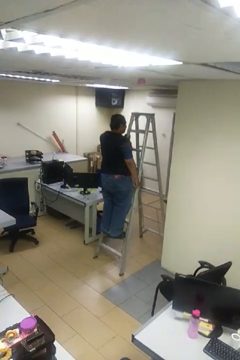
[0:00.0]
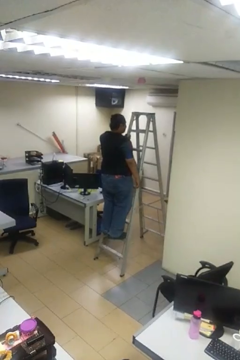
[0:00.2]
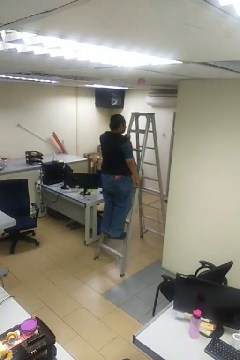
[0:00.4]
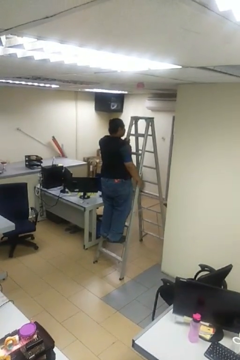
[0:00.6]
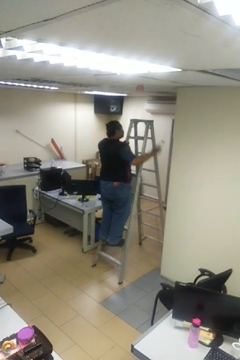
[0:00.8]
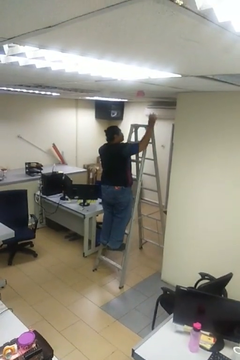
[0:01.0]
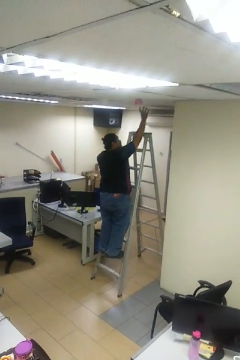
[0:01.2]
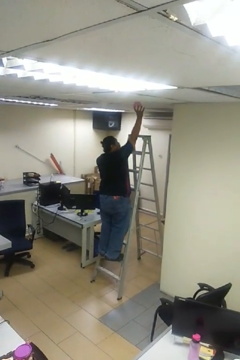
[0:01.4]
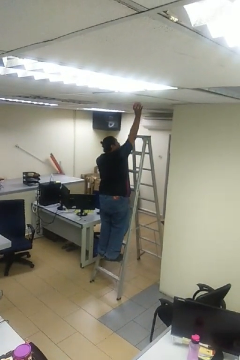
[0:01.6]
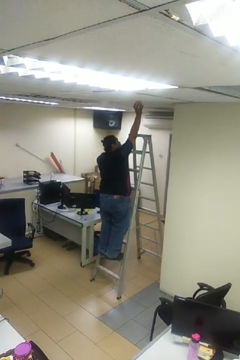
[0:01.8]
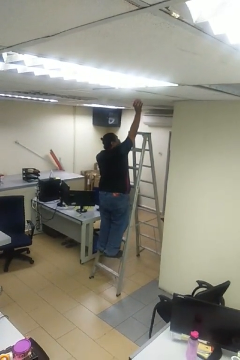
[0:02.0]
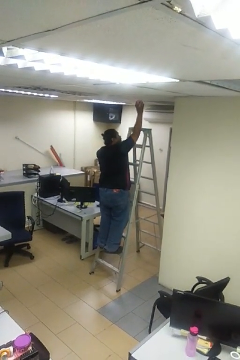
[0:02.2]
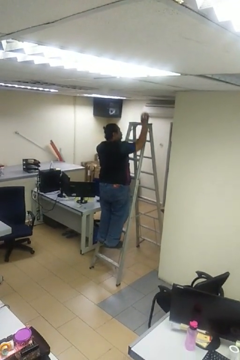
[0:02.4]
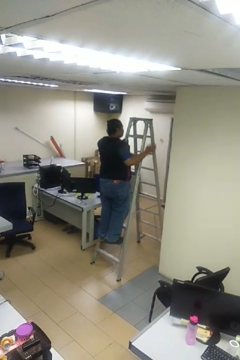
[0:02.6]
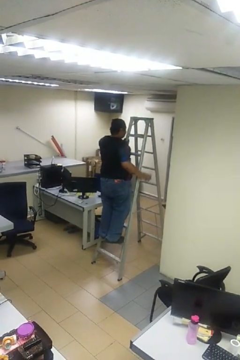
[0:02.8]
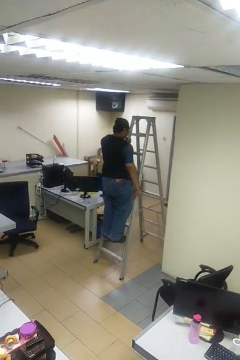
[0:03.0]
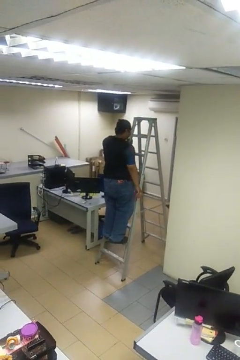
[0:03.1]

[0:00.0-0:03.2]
person takes down smoke detector

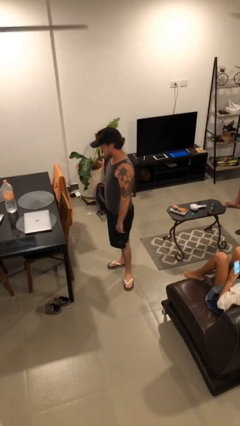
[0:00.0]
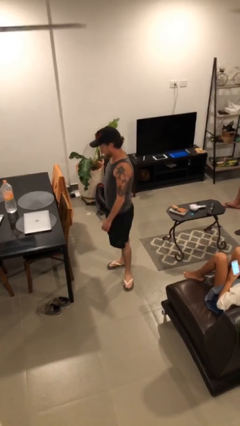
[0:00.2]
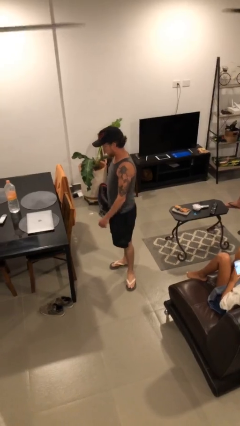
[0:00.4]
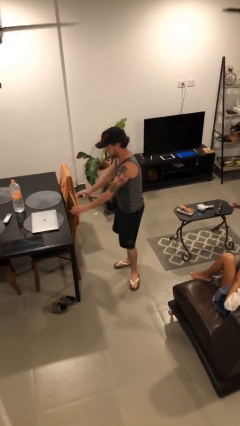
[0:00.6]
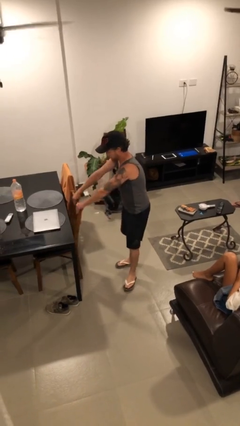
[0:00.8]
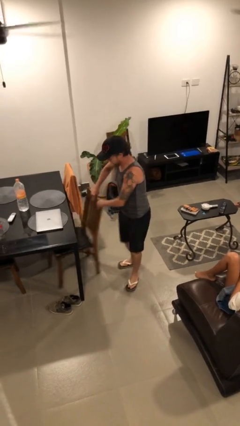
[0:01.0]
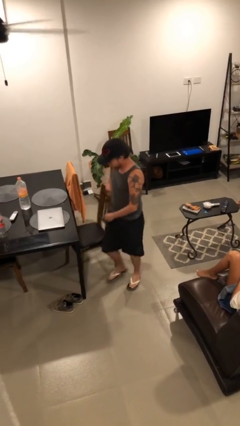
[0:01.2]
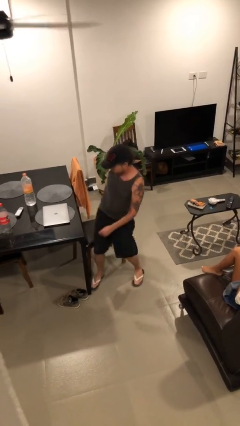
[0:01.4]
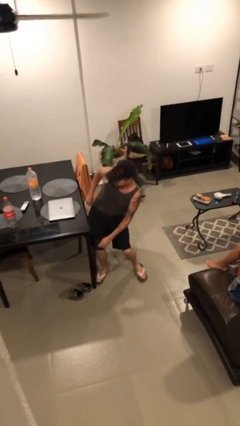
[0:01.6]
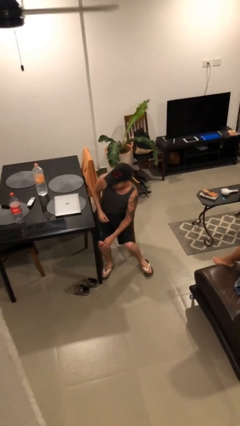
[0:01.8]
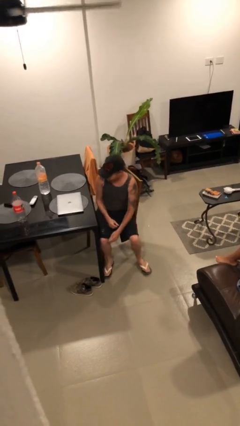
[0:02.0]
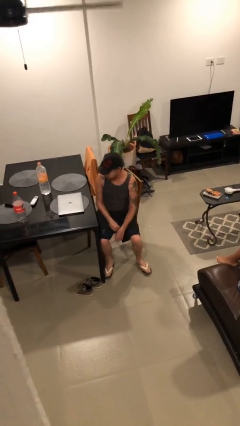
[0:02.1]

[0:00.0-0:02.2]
person sits down

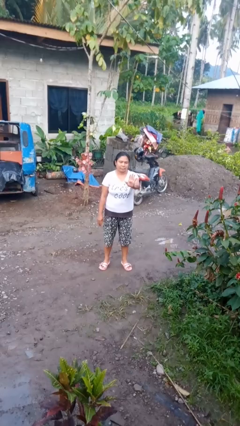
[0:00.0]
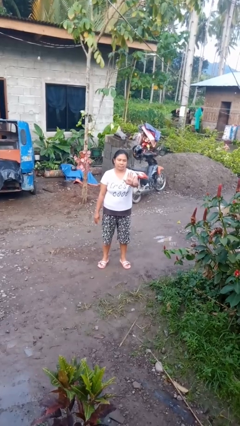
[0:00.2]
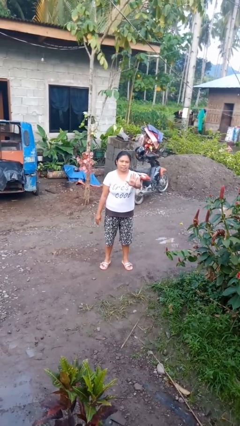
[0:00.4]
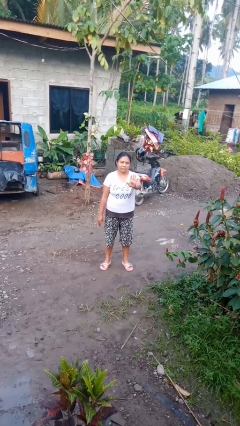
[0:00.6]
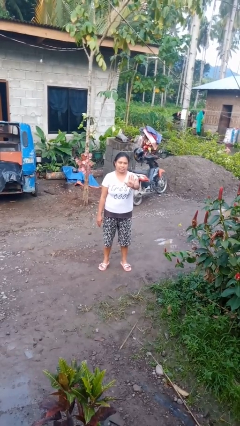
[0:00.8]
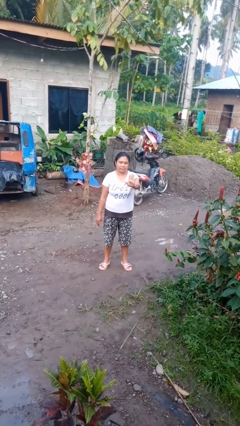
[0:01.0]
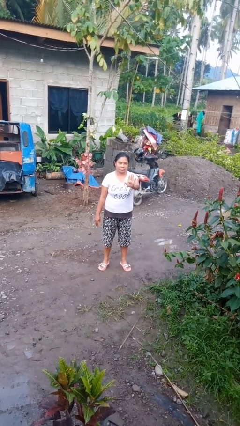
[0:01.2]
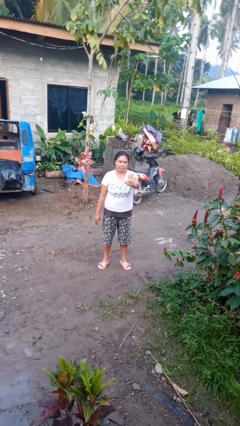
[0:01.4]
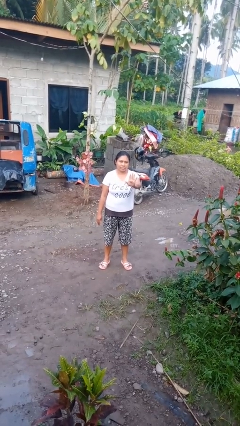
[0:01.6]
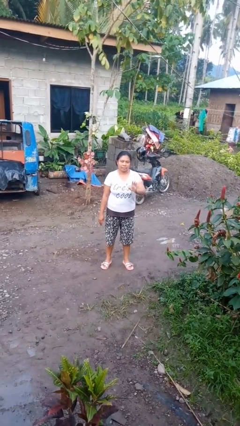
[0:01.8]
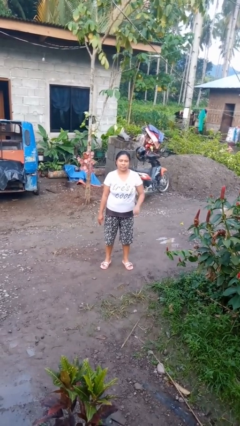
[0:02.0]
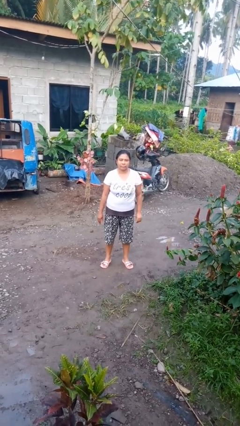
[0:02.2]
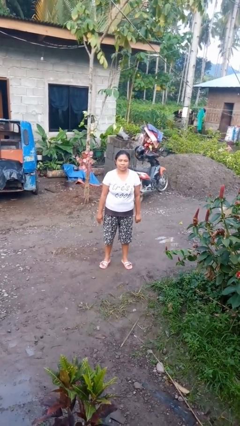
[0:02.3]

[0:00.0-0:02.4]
person gestures number five

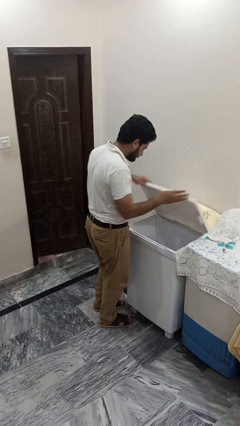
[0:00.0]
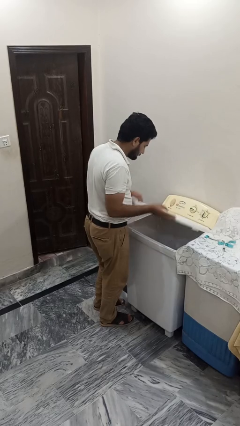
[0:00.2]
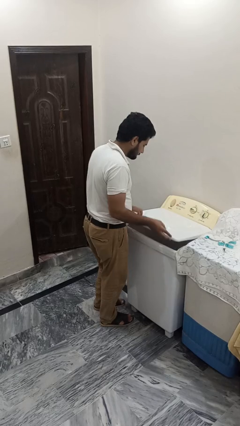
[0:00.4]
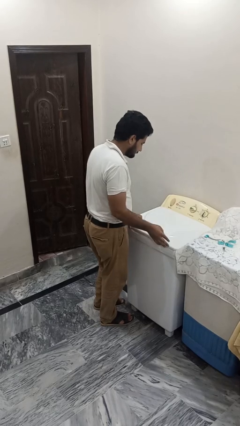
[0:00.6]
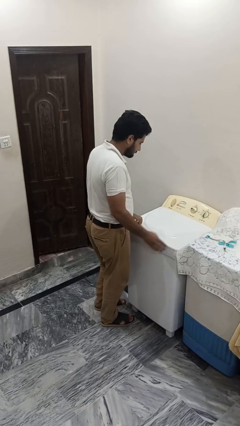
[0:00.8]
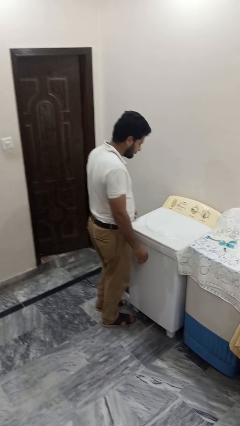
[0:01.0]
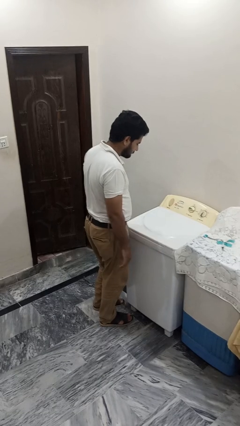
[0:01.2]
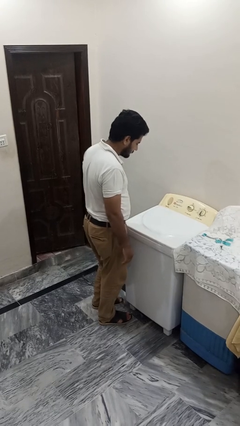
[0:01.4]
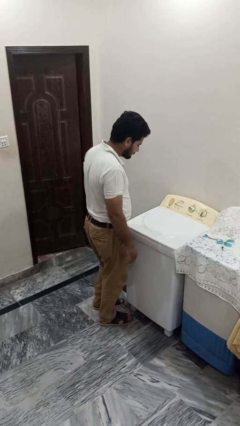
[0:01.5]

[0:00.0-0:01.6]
person closes clothes washer

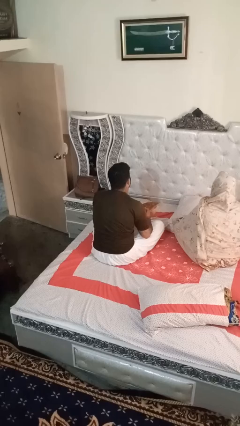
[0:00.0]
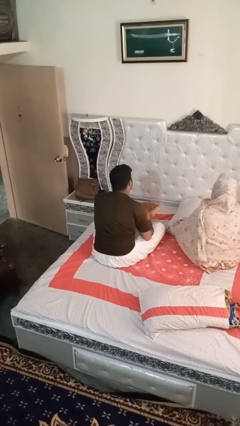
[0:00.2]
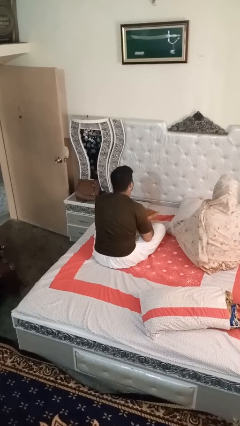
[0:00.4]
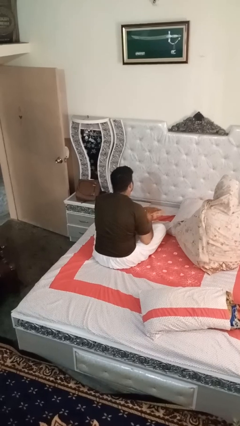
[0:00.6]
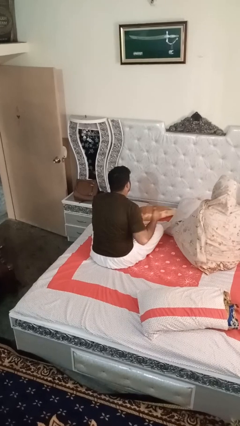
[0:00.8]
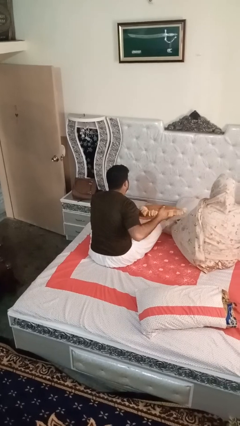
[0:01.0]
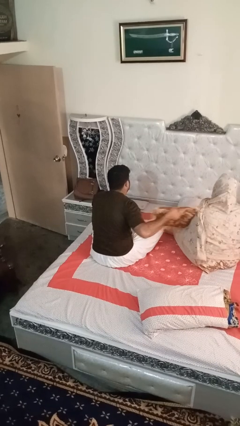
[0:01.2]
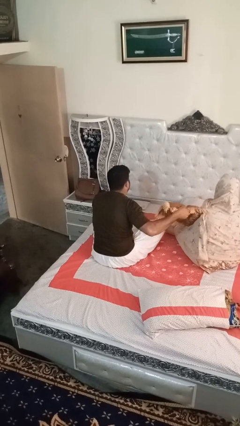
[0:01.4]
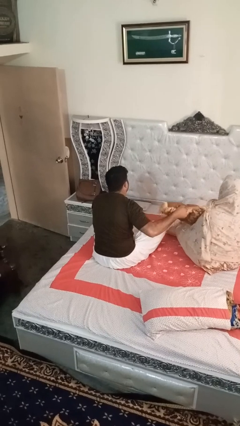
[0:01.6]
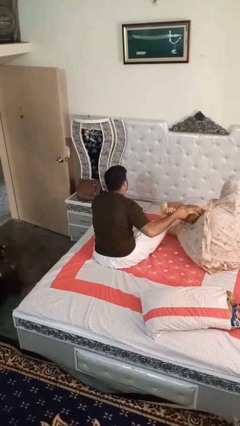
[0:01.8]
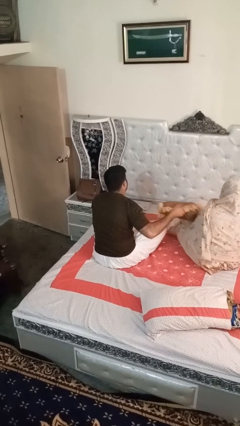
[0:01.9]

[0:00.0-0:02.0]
person hits person with pillow

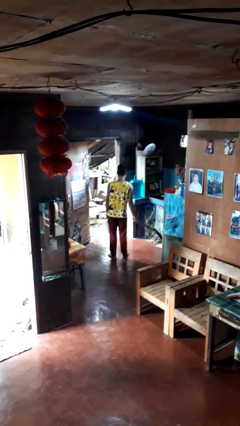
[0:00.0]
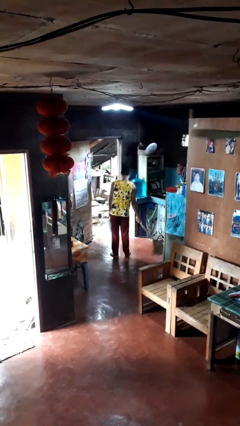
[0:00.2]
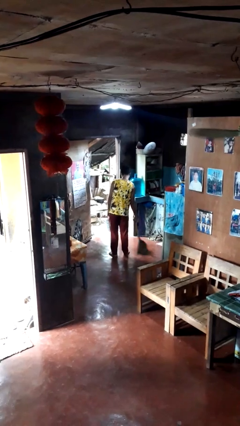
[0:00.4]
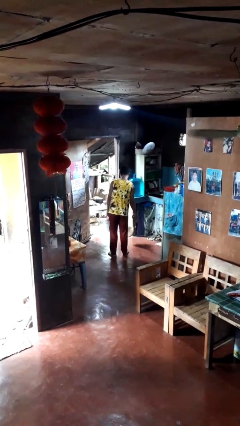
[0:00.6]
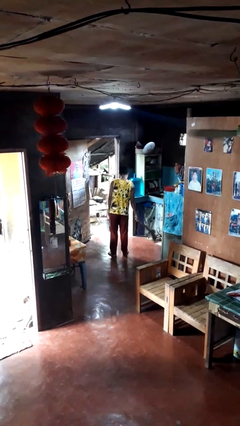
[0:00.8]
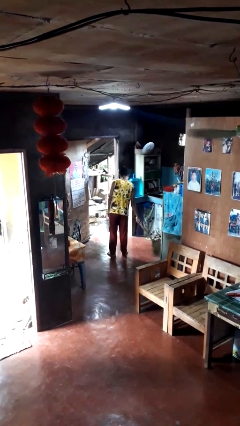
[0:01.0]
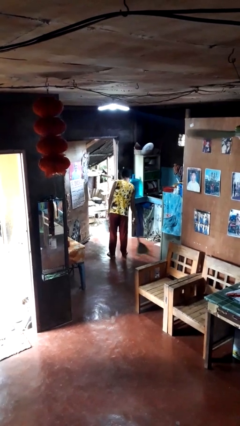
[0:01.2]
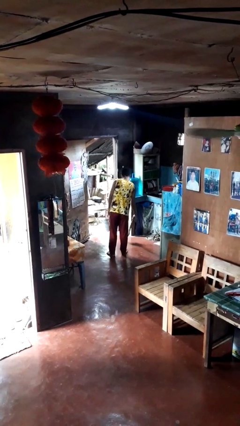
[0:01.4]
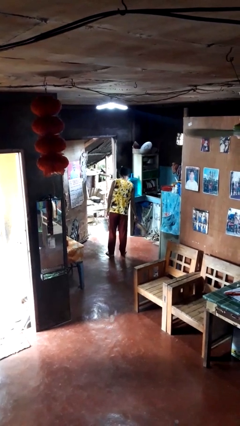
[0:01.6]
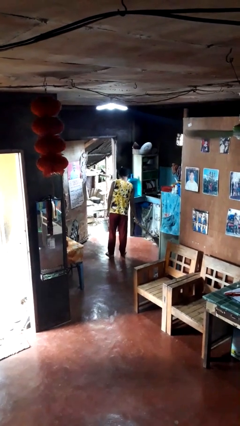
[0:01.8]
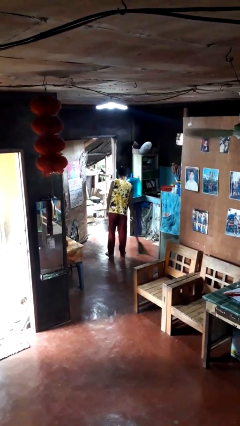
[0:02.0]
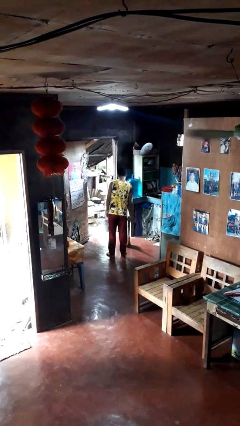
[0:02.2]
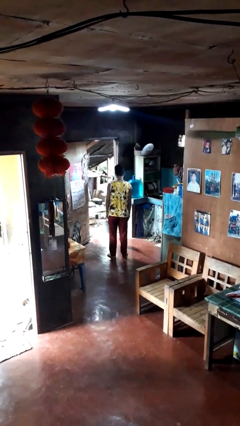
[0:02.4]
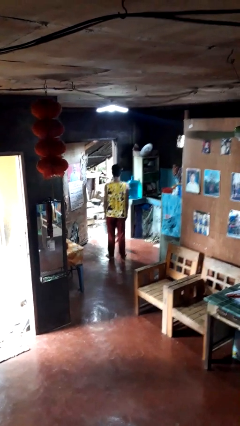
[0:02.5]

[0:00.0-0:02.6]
person sweeps floor

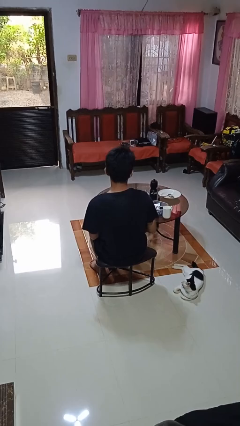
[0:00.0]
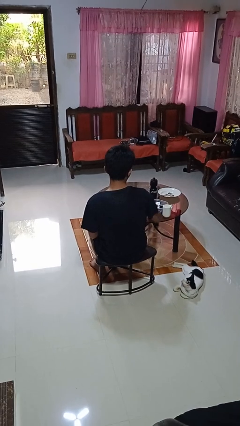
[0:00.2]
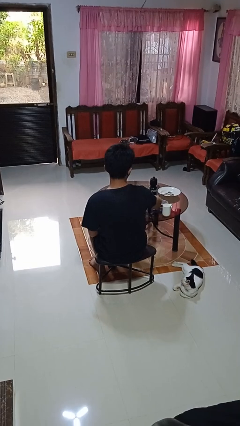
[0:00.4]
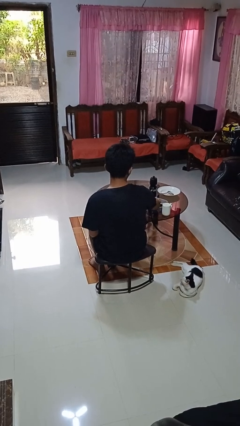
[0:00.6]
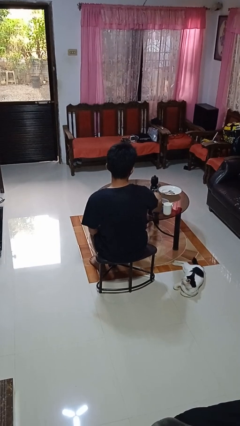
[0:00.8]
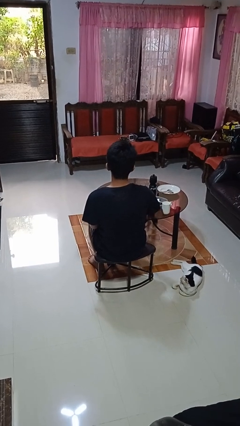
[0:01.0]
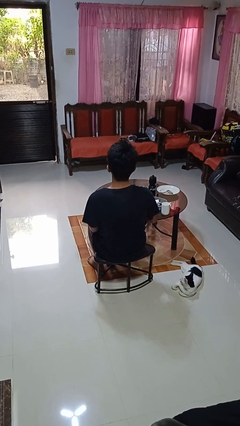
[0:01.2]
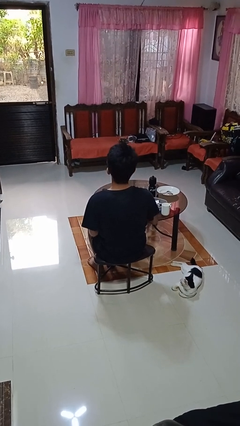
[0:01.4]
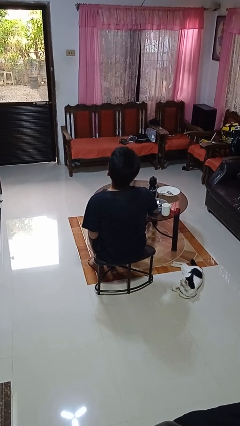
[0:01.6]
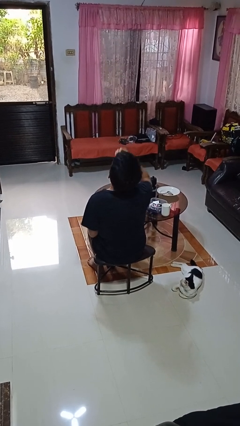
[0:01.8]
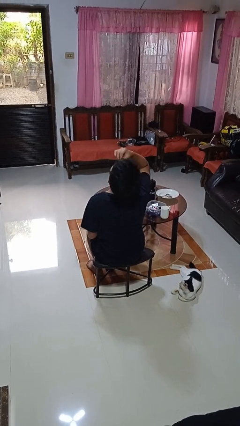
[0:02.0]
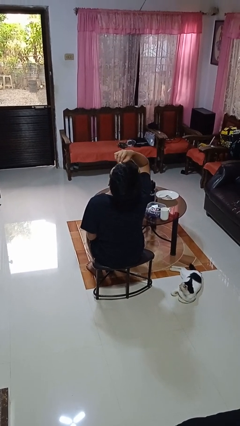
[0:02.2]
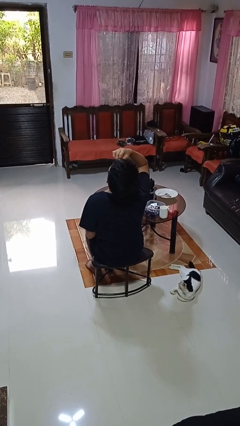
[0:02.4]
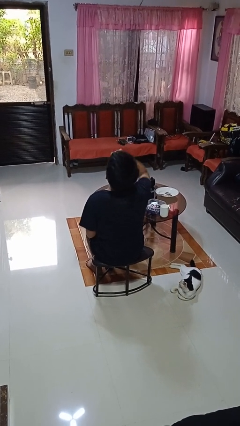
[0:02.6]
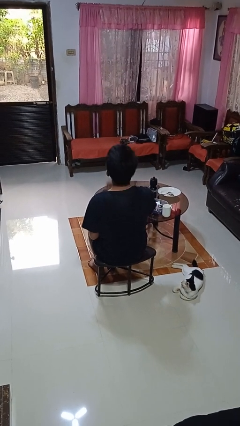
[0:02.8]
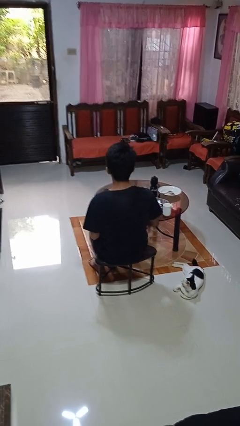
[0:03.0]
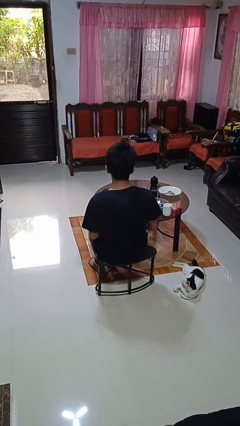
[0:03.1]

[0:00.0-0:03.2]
person takes medicine pills
